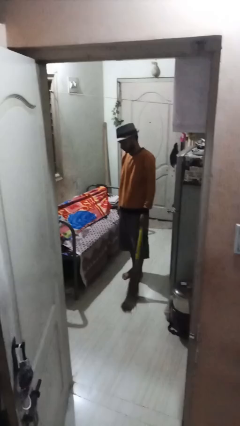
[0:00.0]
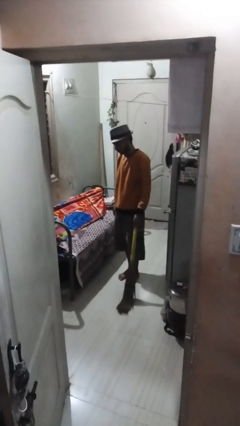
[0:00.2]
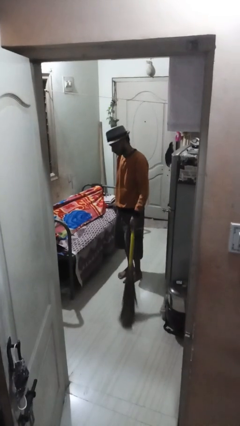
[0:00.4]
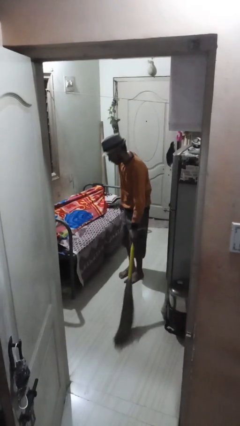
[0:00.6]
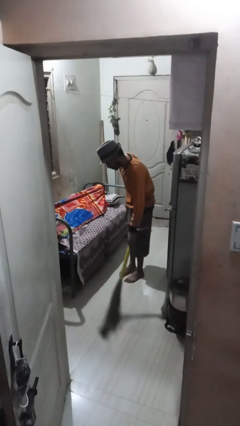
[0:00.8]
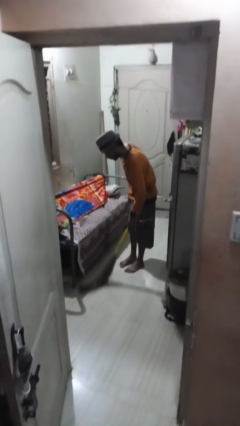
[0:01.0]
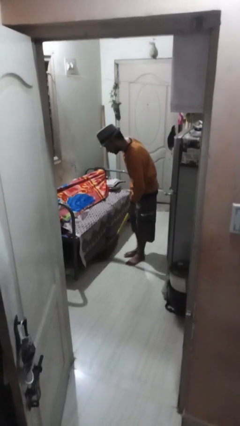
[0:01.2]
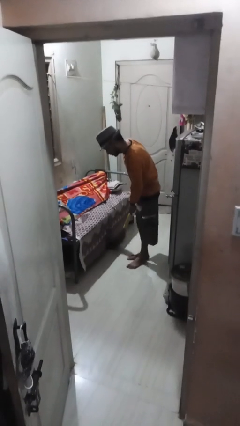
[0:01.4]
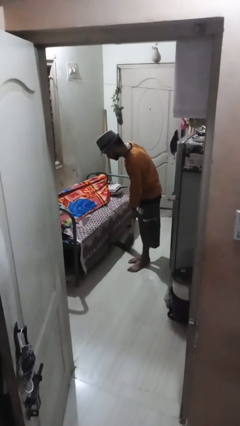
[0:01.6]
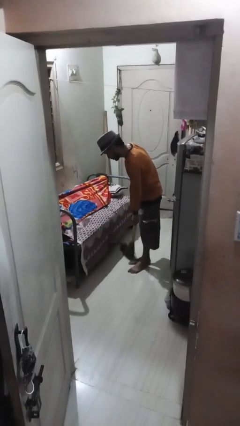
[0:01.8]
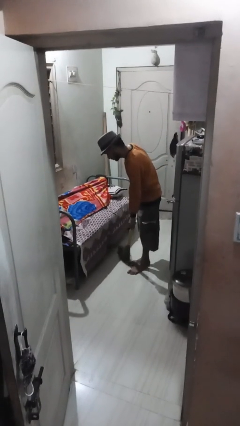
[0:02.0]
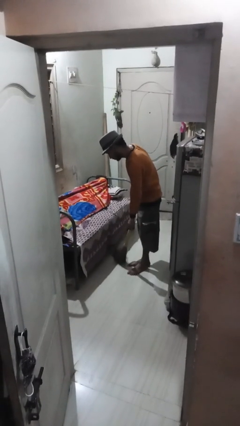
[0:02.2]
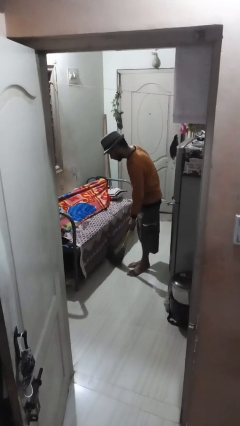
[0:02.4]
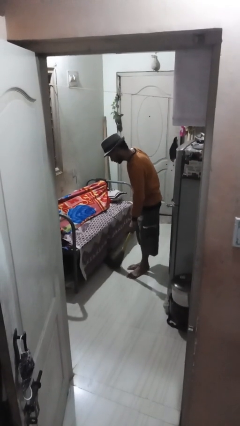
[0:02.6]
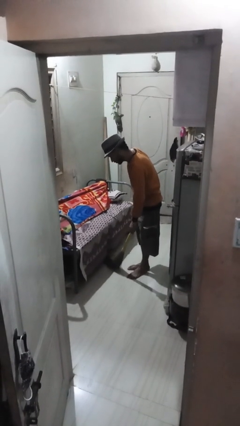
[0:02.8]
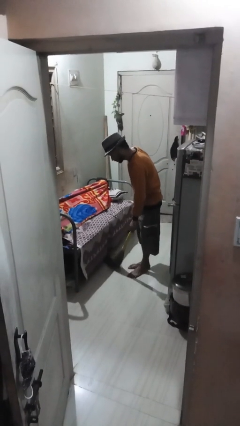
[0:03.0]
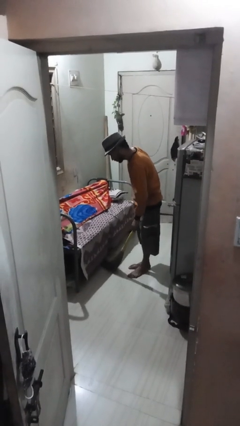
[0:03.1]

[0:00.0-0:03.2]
person sweeps floor

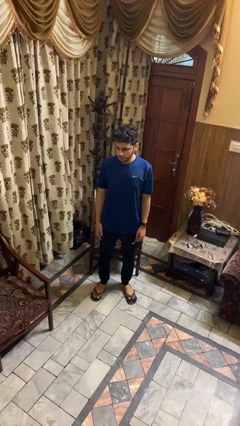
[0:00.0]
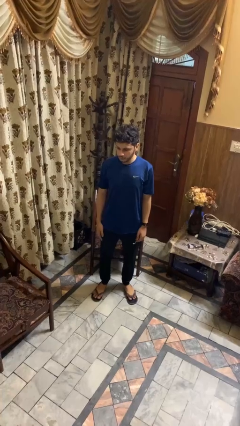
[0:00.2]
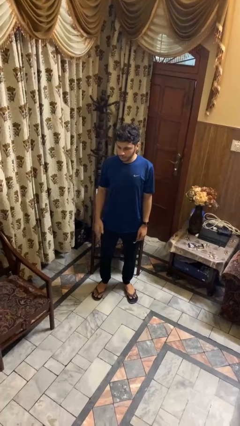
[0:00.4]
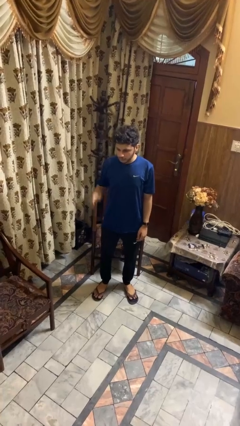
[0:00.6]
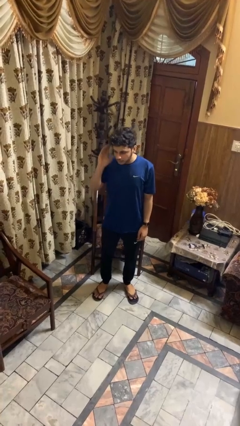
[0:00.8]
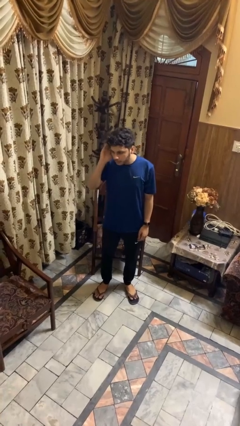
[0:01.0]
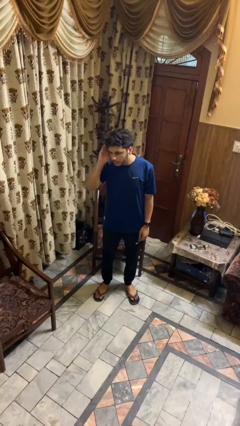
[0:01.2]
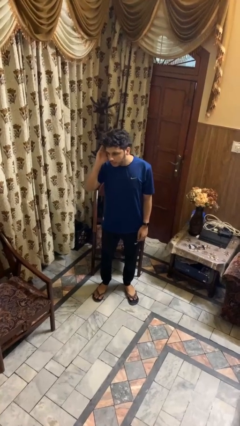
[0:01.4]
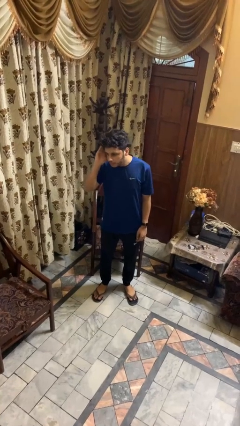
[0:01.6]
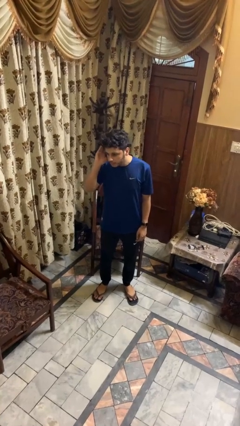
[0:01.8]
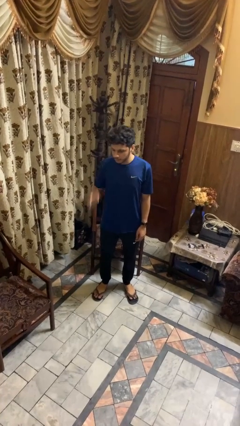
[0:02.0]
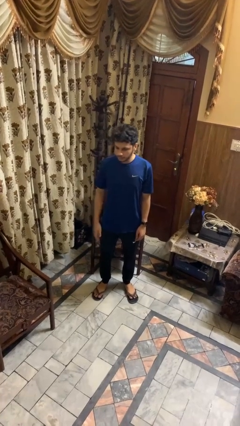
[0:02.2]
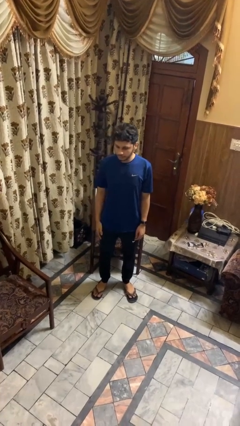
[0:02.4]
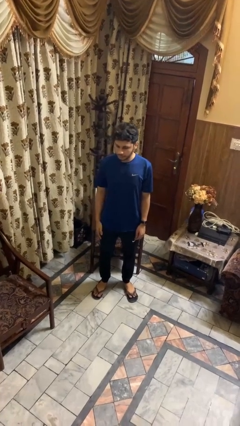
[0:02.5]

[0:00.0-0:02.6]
person gestures listen closely

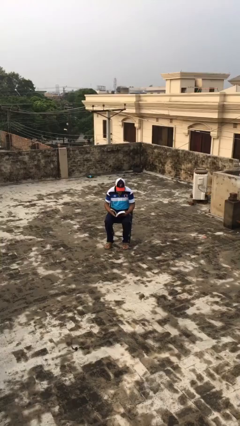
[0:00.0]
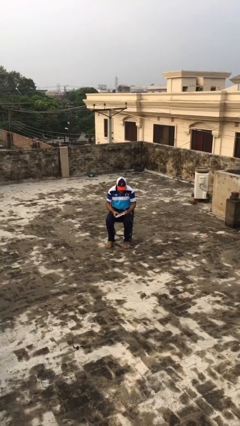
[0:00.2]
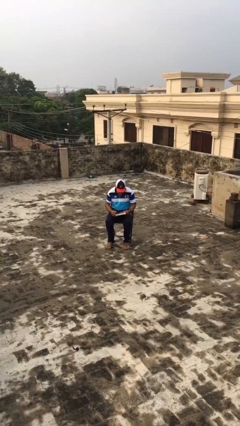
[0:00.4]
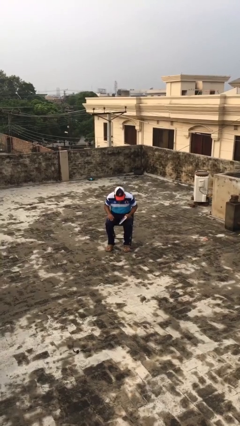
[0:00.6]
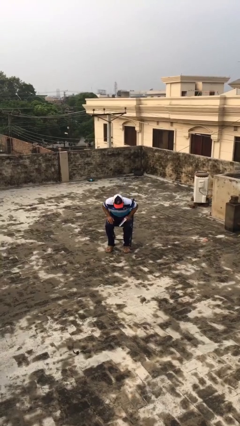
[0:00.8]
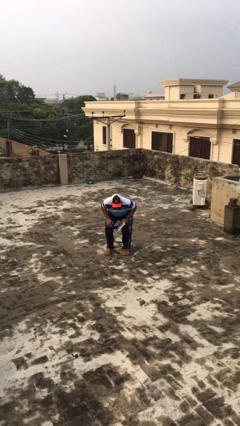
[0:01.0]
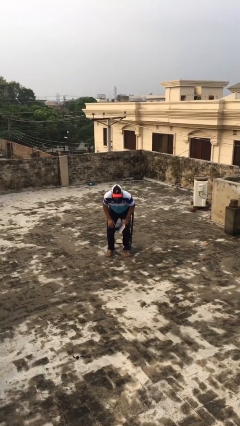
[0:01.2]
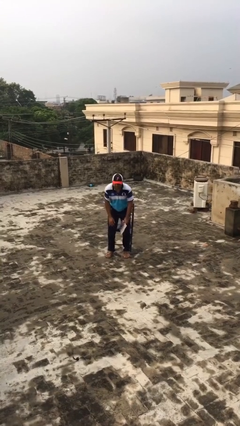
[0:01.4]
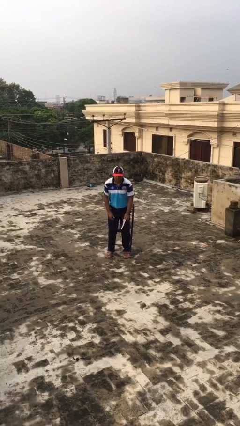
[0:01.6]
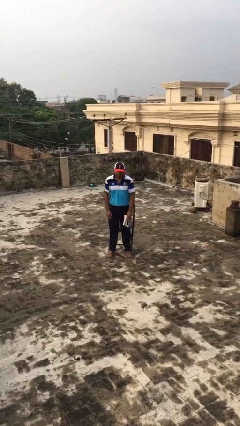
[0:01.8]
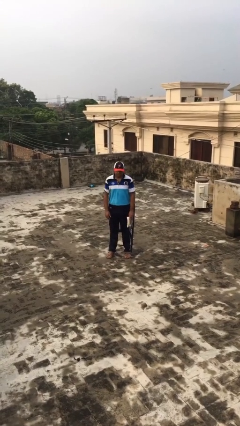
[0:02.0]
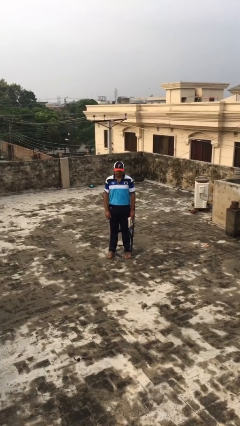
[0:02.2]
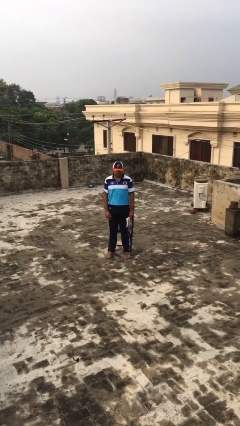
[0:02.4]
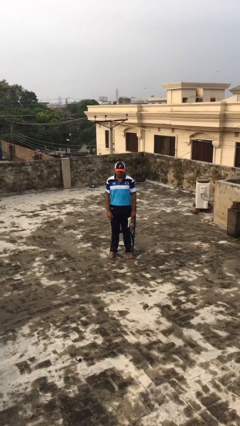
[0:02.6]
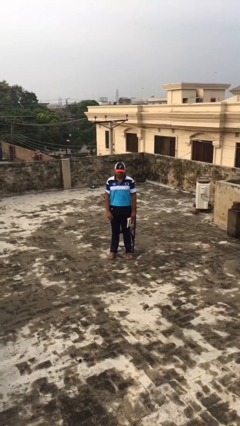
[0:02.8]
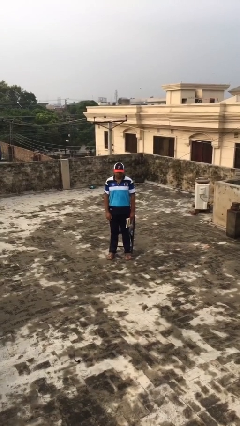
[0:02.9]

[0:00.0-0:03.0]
person stands up

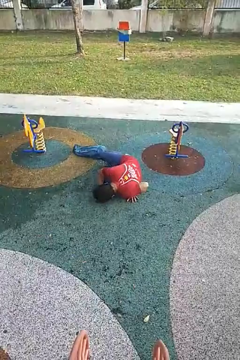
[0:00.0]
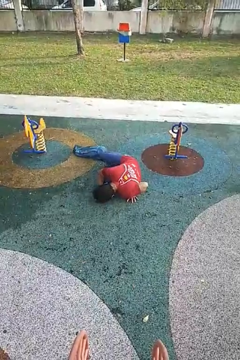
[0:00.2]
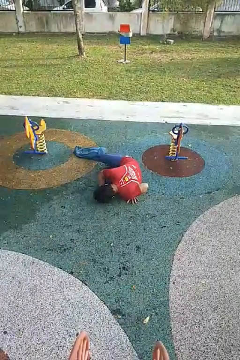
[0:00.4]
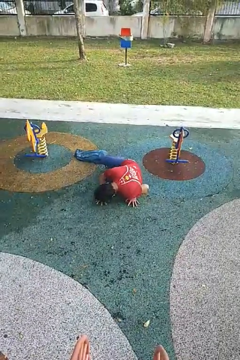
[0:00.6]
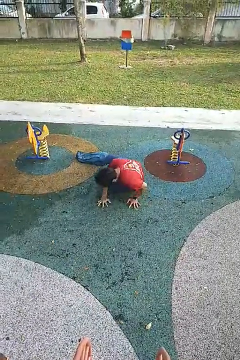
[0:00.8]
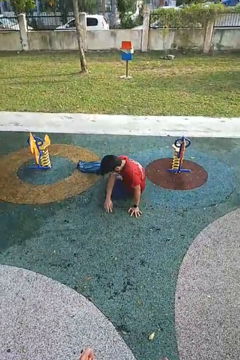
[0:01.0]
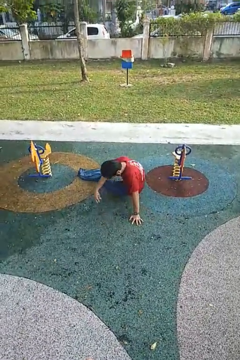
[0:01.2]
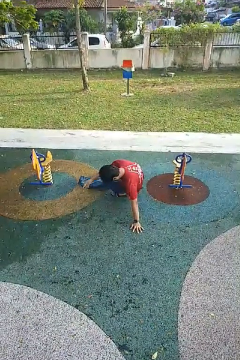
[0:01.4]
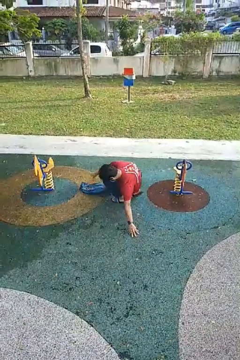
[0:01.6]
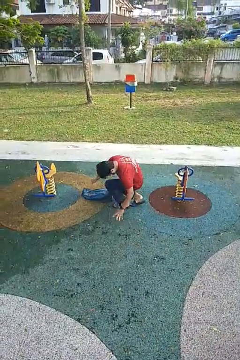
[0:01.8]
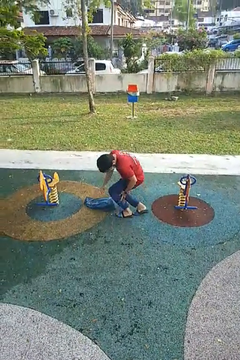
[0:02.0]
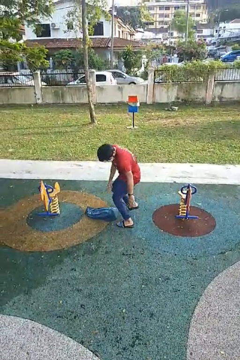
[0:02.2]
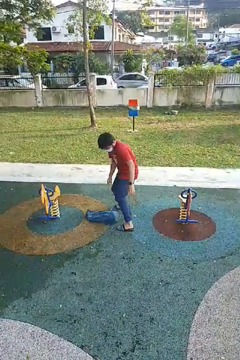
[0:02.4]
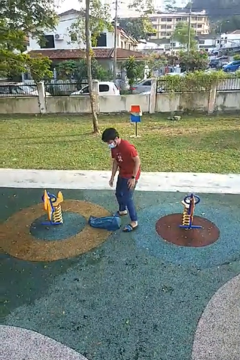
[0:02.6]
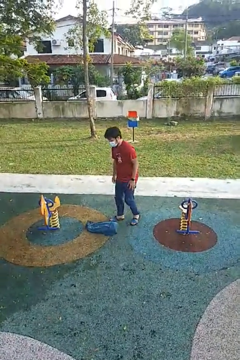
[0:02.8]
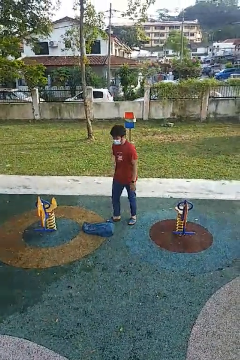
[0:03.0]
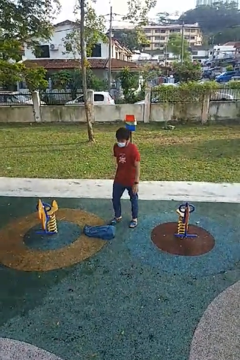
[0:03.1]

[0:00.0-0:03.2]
person stands up from floor

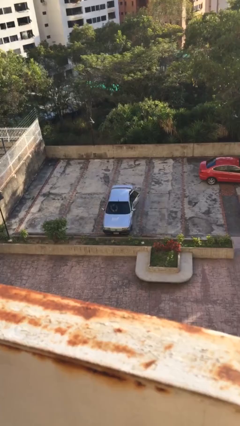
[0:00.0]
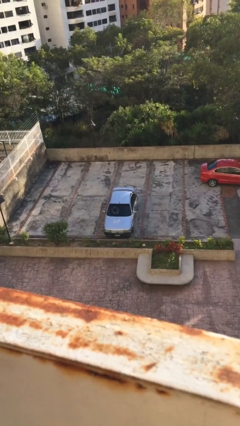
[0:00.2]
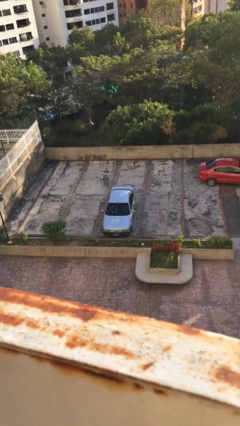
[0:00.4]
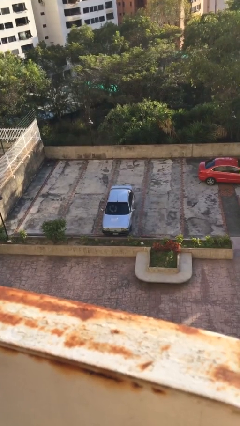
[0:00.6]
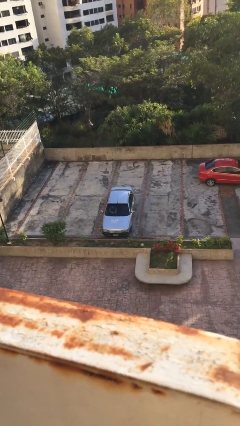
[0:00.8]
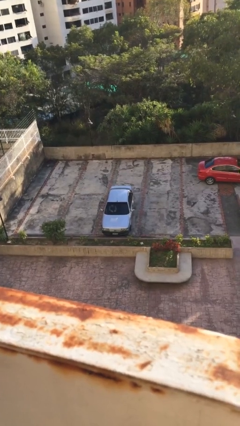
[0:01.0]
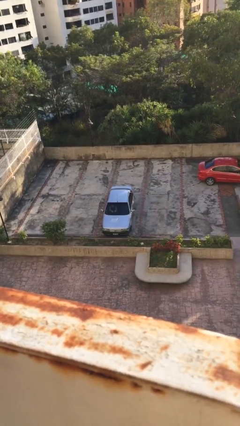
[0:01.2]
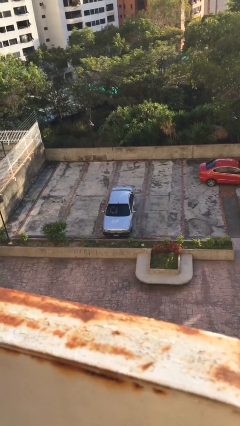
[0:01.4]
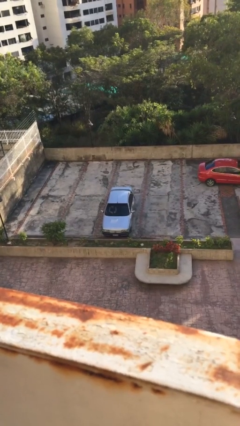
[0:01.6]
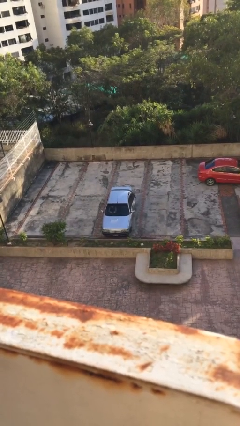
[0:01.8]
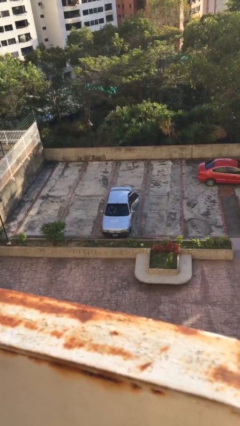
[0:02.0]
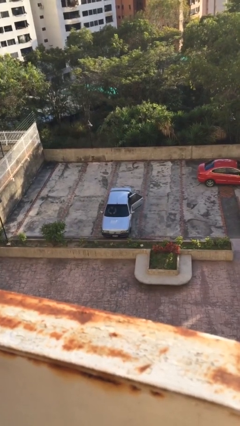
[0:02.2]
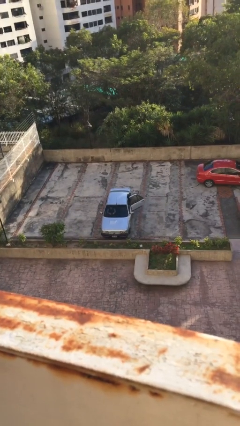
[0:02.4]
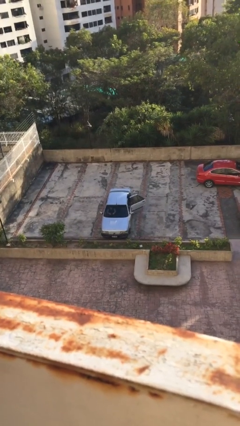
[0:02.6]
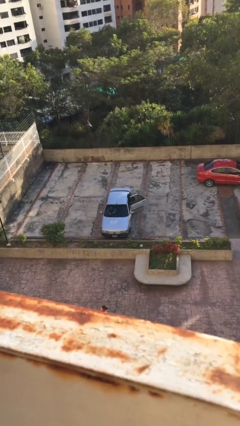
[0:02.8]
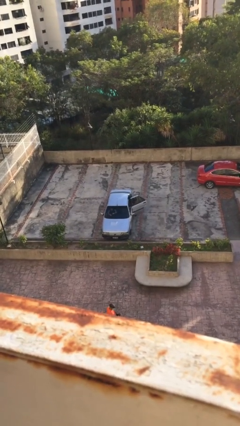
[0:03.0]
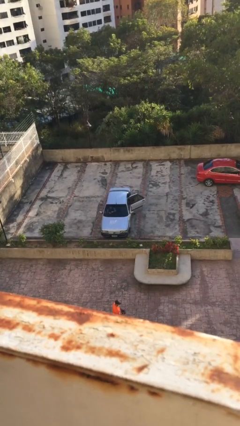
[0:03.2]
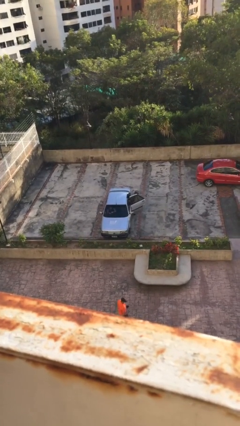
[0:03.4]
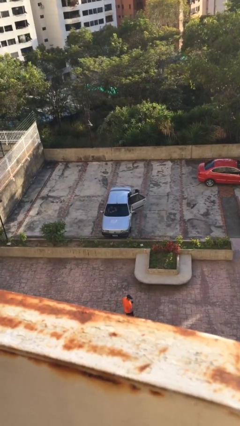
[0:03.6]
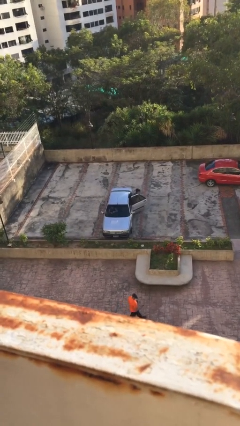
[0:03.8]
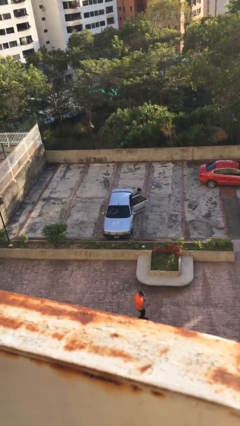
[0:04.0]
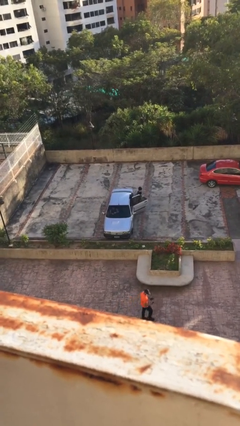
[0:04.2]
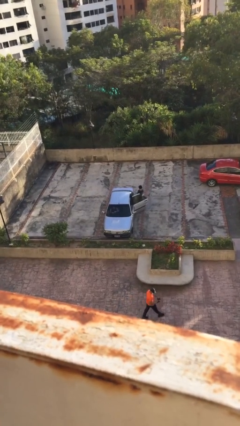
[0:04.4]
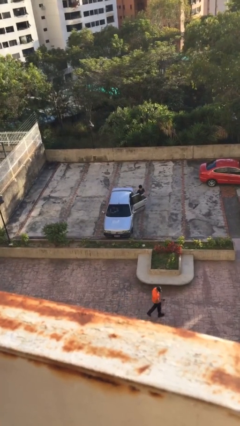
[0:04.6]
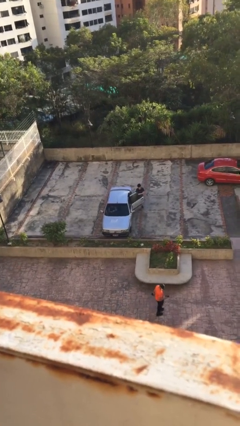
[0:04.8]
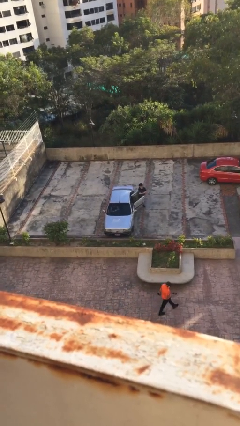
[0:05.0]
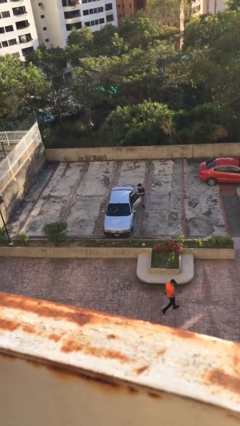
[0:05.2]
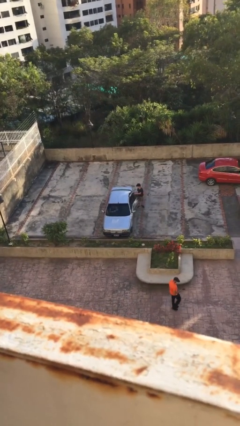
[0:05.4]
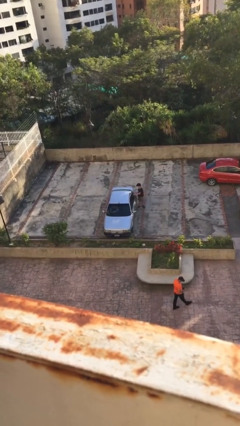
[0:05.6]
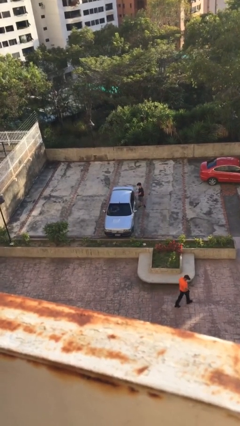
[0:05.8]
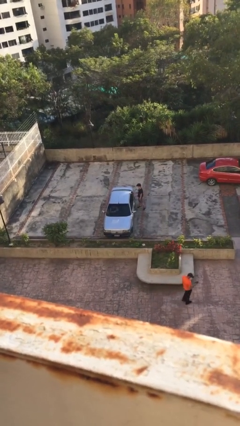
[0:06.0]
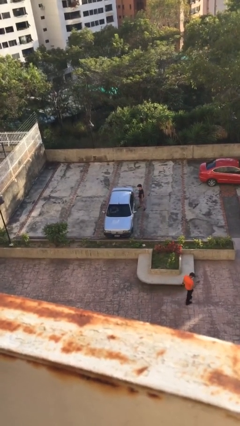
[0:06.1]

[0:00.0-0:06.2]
car drops off person
